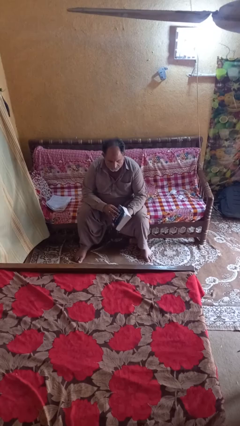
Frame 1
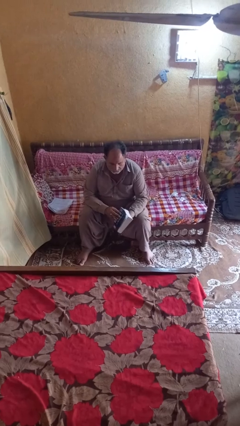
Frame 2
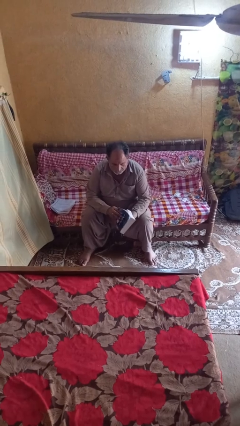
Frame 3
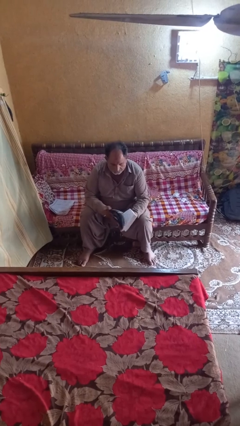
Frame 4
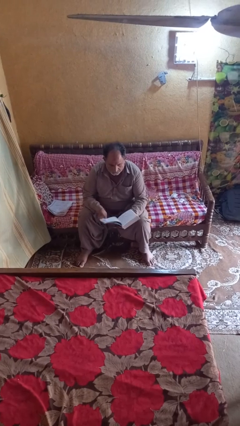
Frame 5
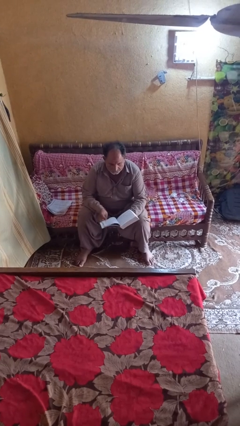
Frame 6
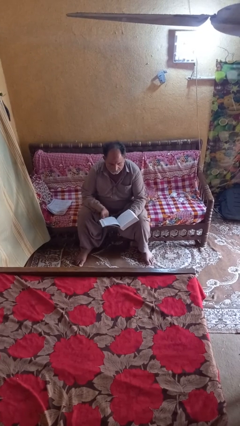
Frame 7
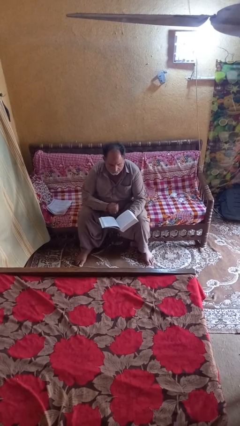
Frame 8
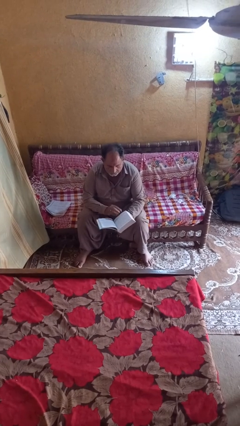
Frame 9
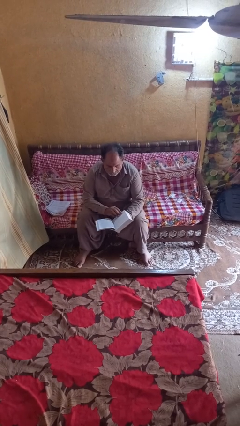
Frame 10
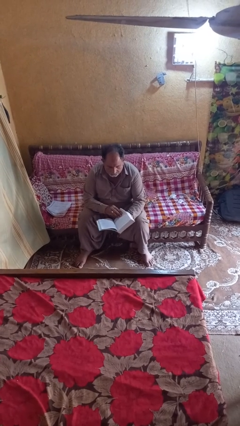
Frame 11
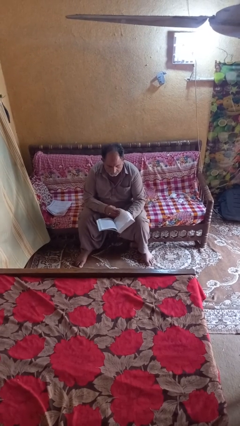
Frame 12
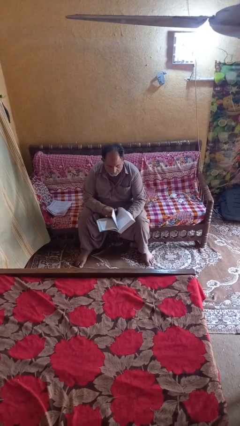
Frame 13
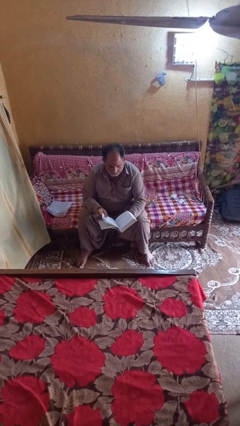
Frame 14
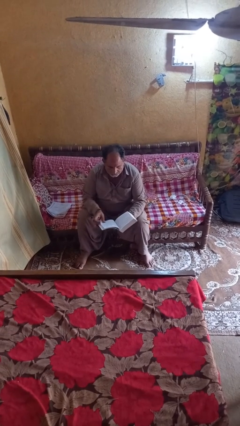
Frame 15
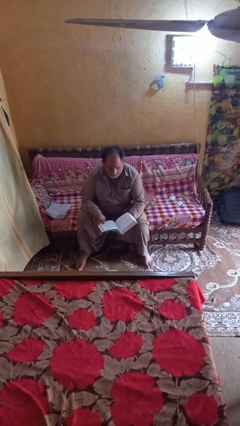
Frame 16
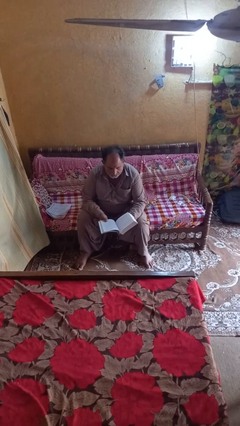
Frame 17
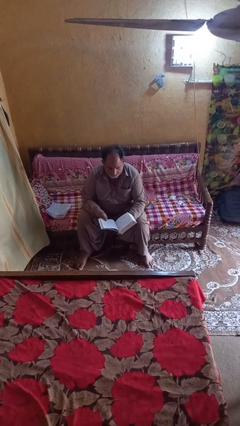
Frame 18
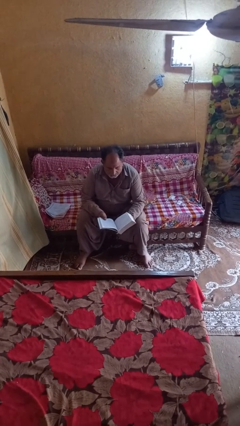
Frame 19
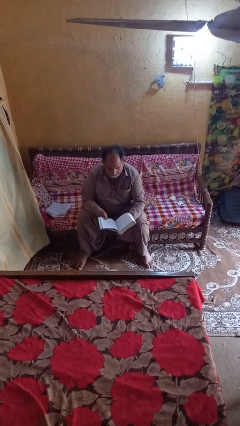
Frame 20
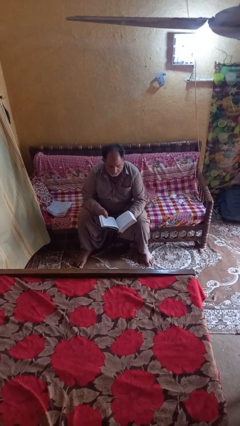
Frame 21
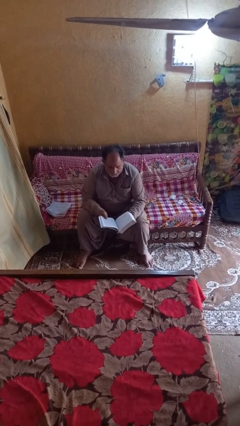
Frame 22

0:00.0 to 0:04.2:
person reads book

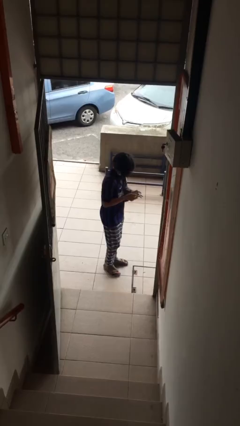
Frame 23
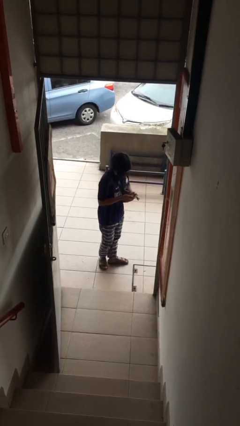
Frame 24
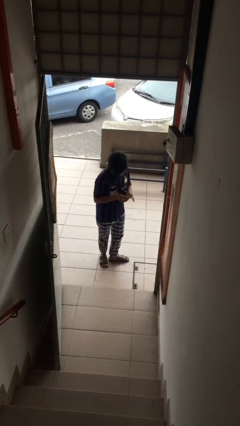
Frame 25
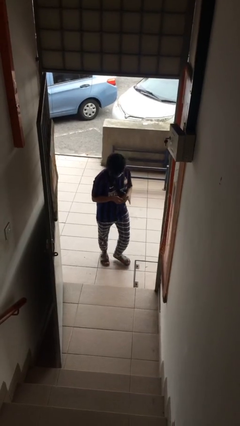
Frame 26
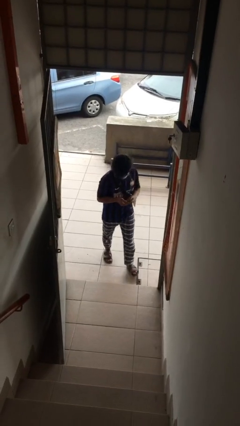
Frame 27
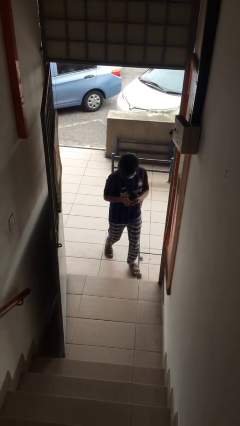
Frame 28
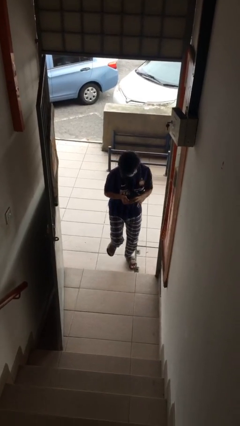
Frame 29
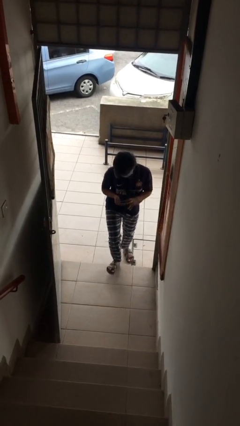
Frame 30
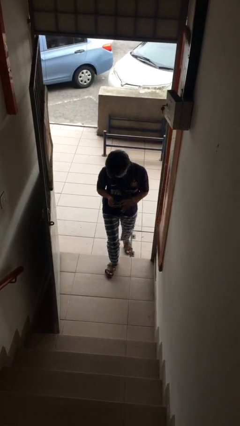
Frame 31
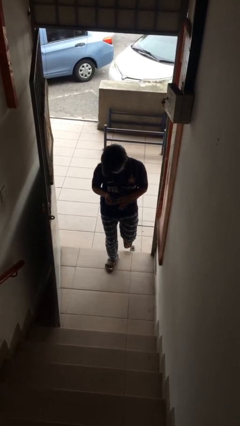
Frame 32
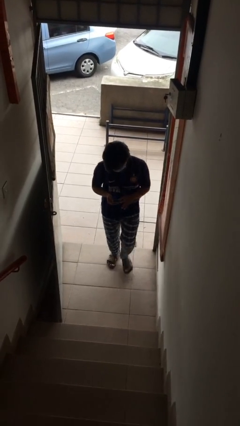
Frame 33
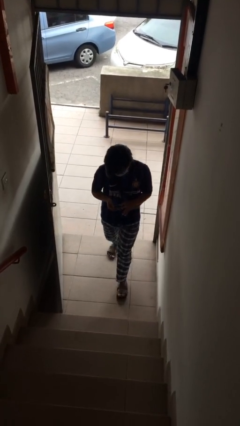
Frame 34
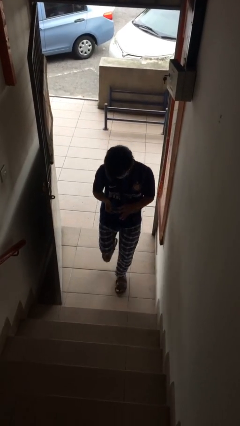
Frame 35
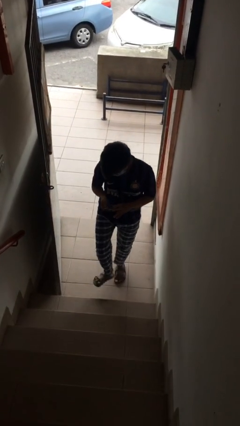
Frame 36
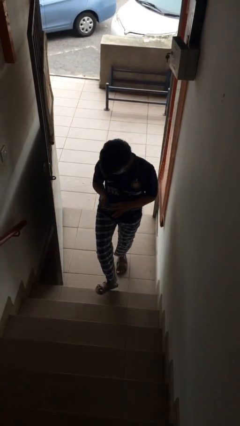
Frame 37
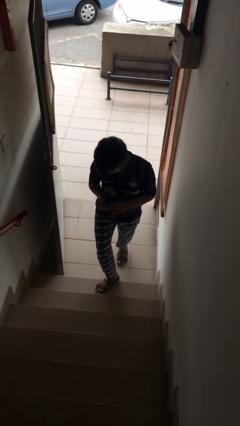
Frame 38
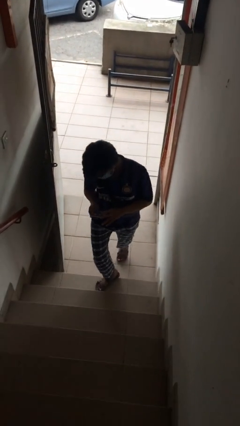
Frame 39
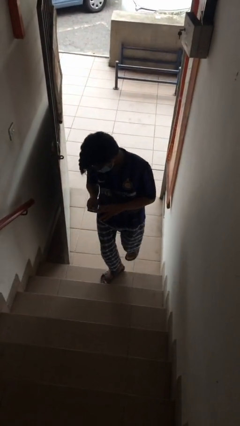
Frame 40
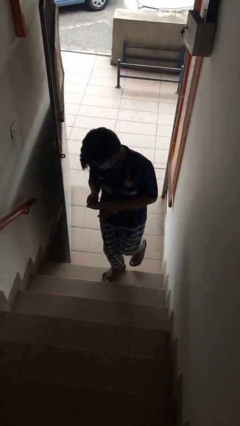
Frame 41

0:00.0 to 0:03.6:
person enters scene through structure

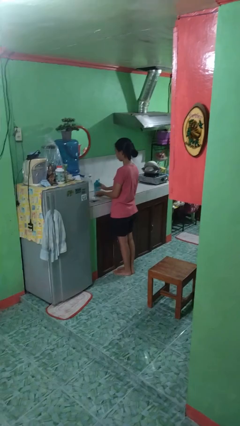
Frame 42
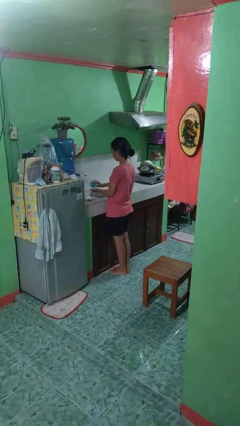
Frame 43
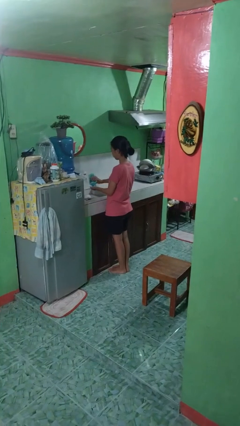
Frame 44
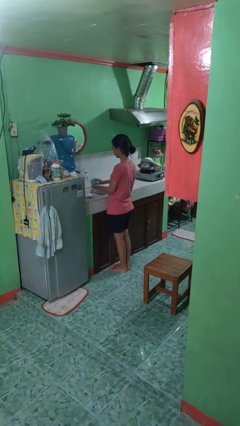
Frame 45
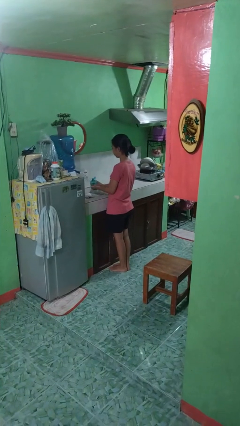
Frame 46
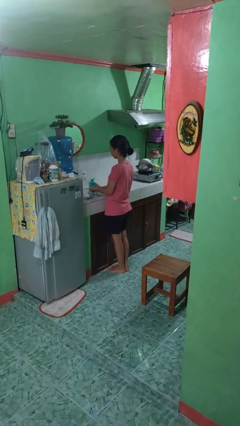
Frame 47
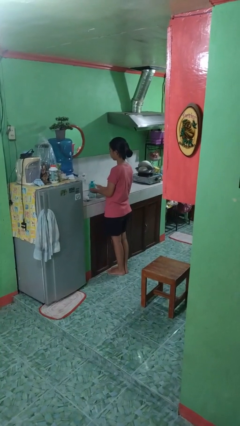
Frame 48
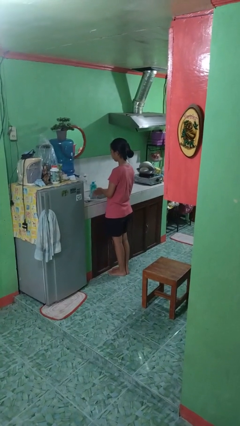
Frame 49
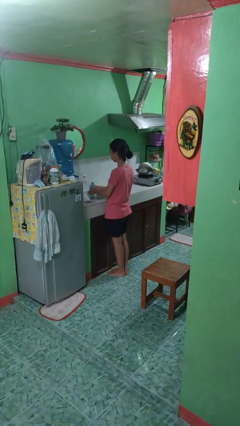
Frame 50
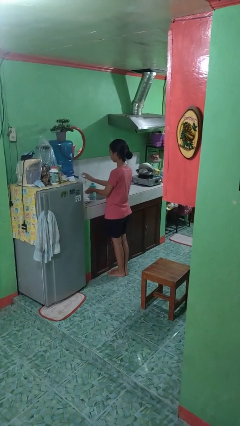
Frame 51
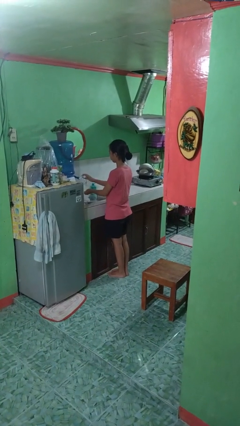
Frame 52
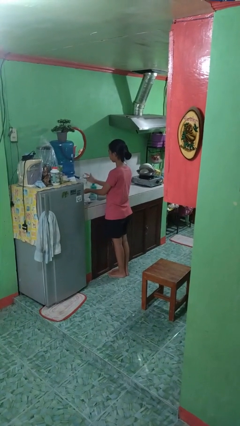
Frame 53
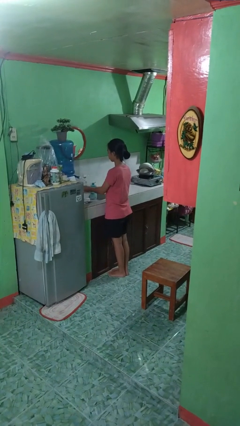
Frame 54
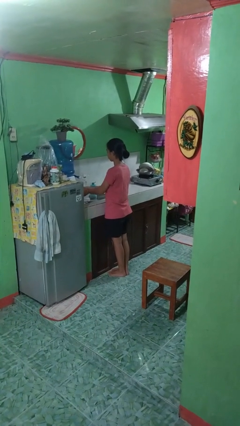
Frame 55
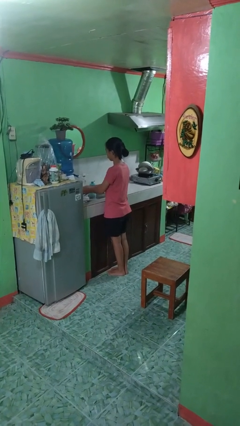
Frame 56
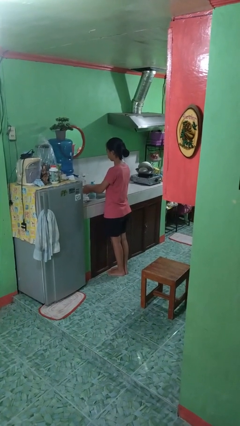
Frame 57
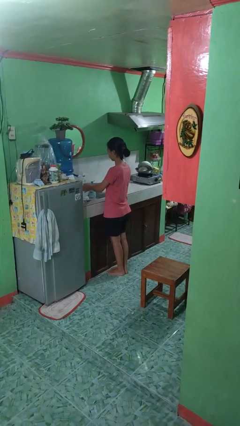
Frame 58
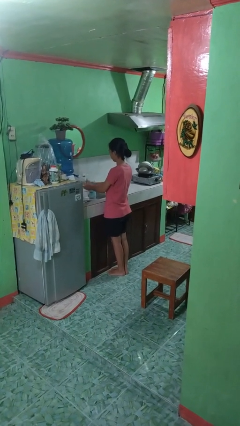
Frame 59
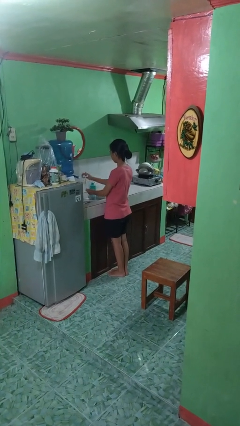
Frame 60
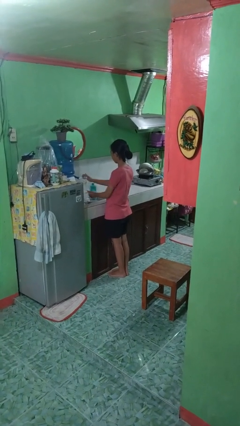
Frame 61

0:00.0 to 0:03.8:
person washes hands

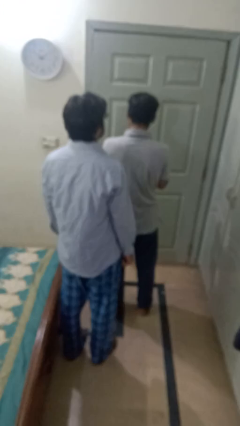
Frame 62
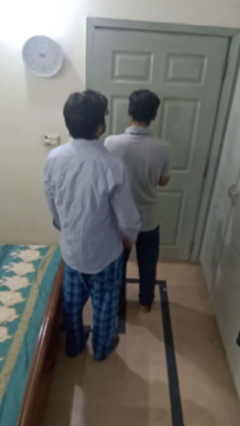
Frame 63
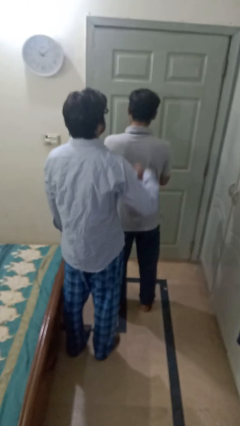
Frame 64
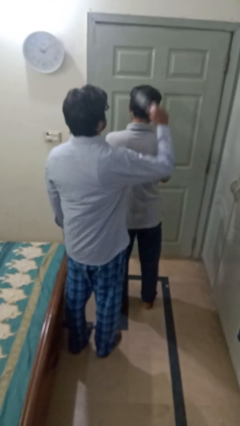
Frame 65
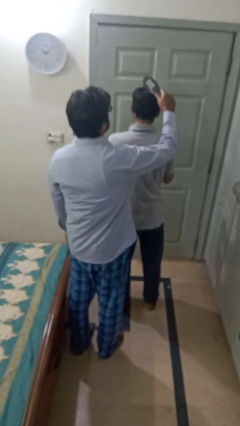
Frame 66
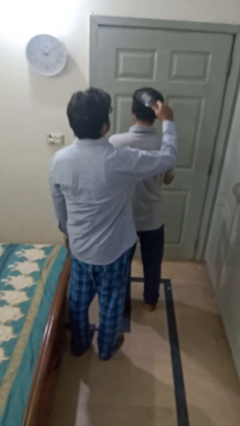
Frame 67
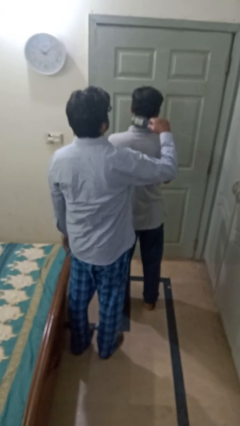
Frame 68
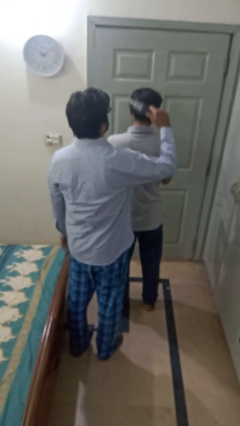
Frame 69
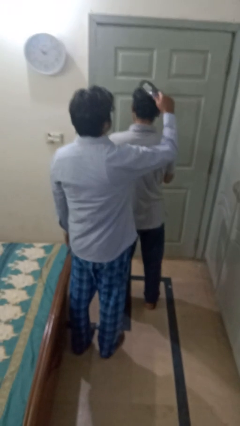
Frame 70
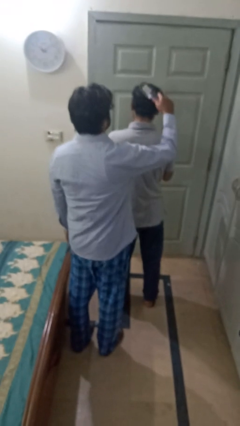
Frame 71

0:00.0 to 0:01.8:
person brushes hair of person

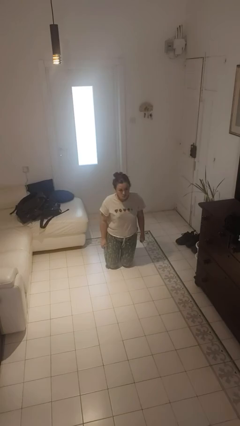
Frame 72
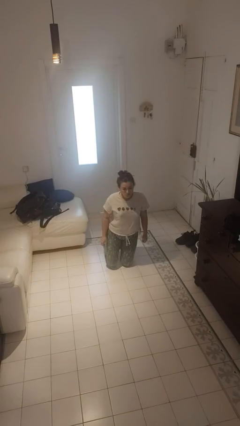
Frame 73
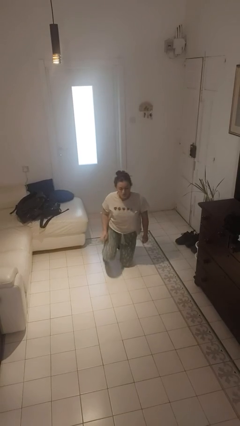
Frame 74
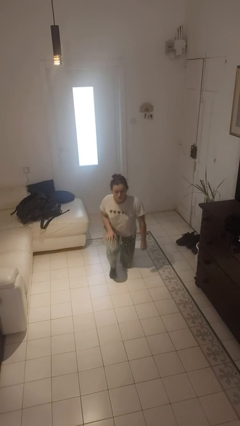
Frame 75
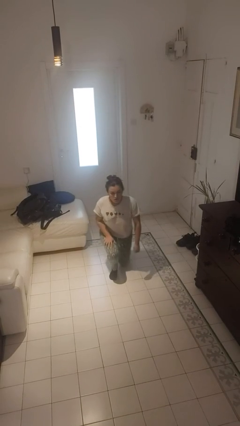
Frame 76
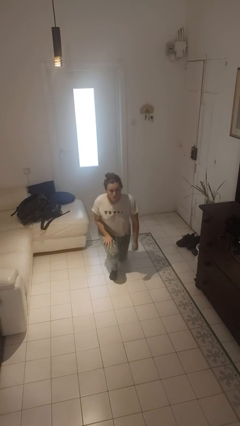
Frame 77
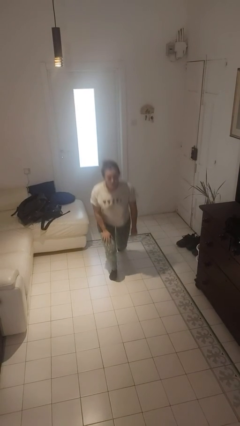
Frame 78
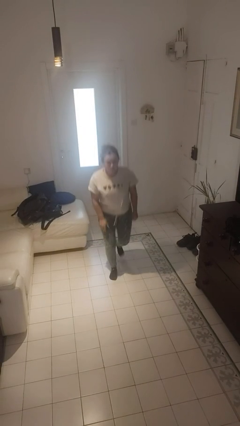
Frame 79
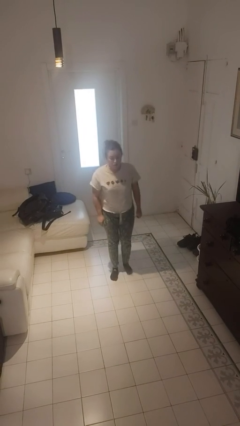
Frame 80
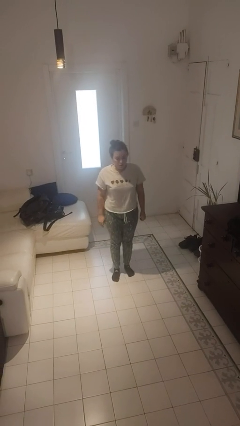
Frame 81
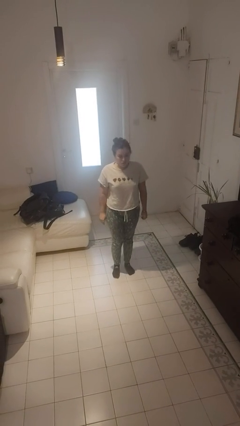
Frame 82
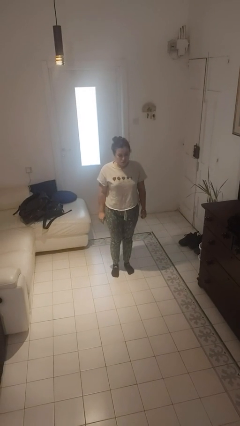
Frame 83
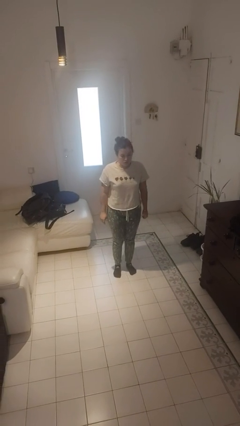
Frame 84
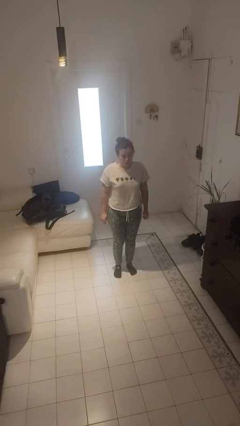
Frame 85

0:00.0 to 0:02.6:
person stands up from floor

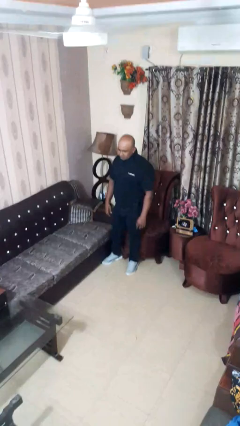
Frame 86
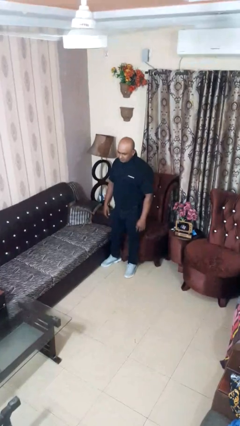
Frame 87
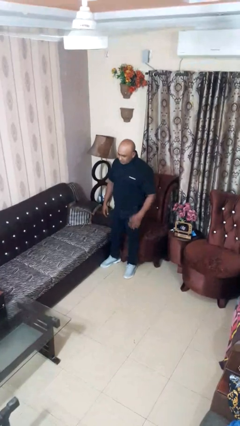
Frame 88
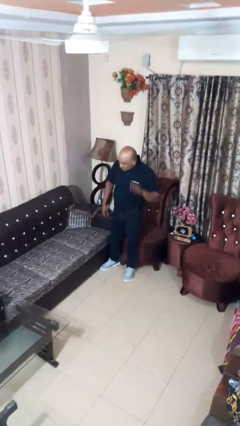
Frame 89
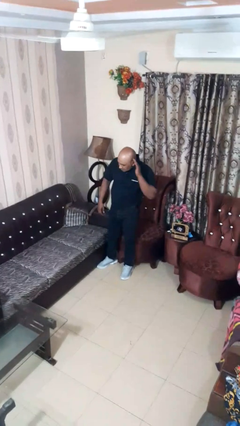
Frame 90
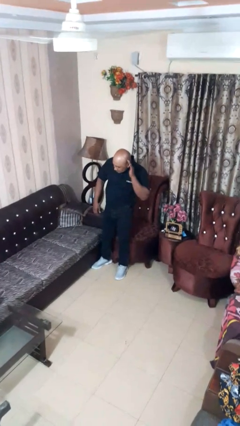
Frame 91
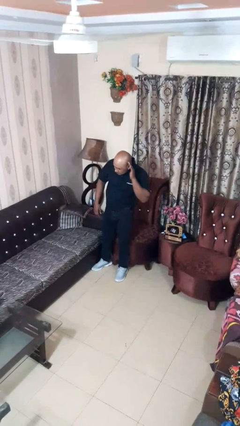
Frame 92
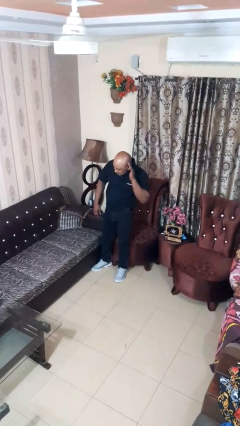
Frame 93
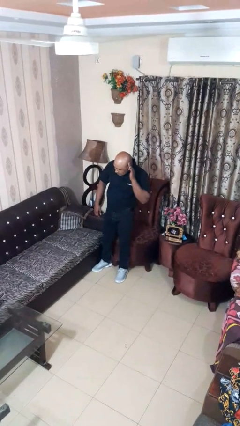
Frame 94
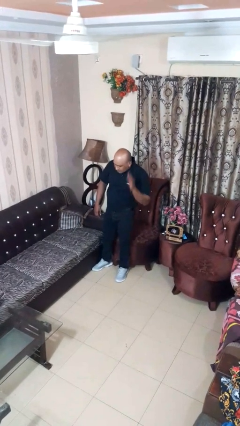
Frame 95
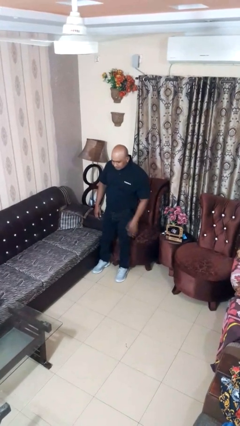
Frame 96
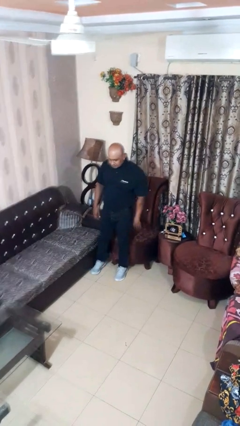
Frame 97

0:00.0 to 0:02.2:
person gestures listen closely
